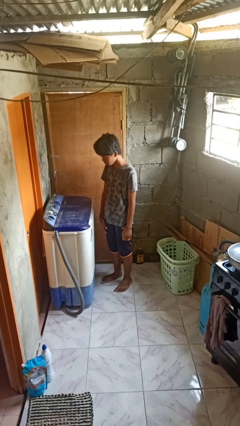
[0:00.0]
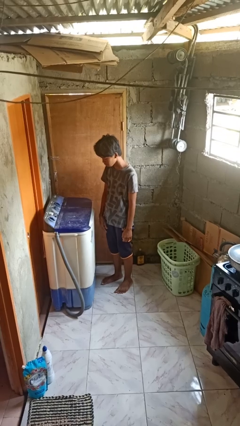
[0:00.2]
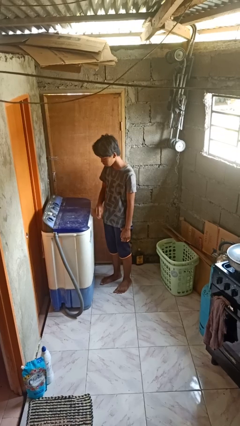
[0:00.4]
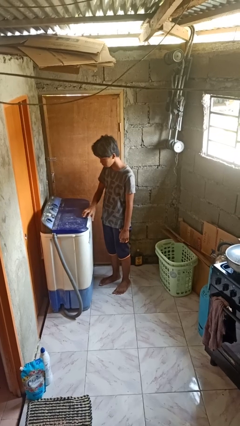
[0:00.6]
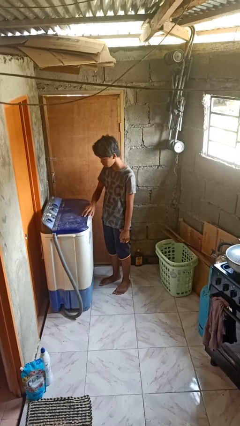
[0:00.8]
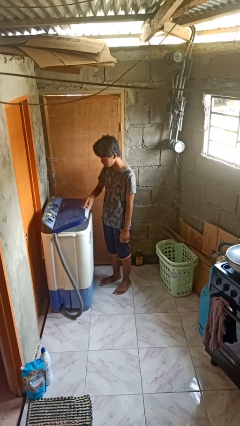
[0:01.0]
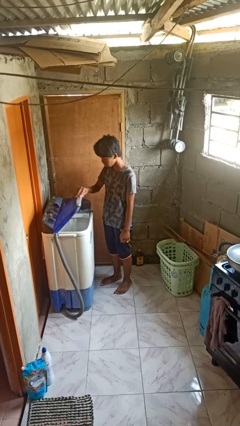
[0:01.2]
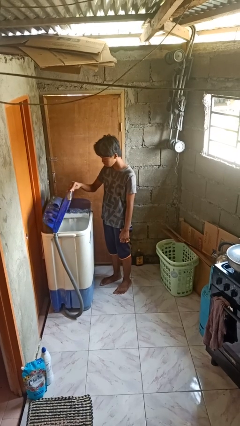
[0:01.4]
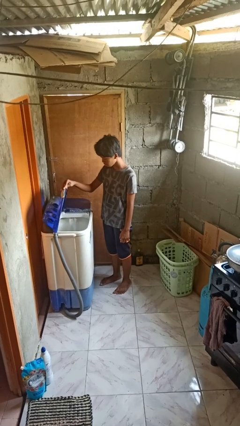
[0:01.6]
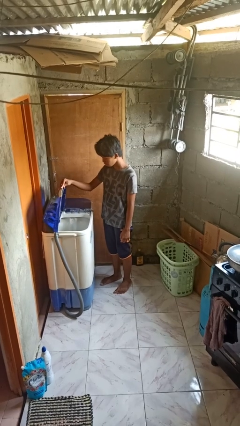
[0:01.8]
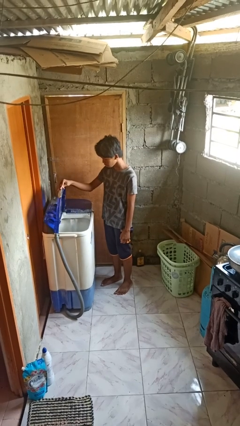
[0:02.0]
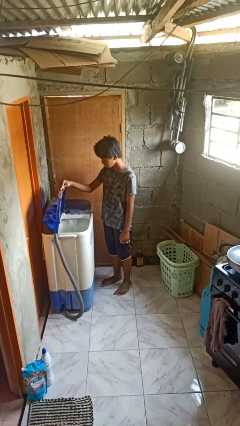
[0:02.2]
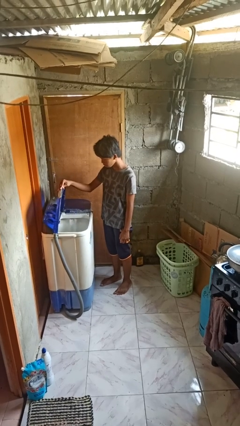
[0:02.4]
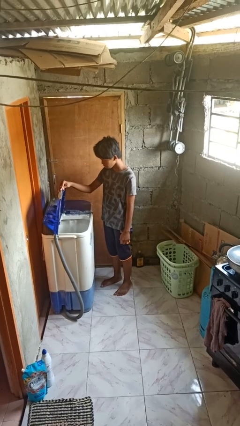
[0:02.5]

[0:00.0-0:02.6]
person opens clothes washer

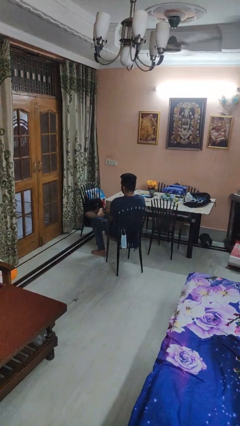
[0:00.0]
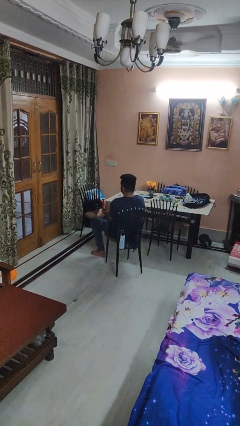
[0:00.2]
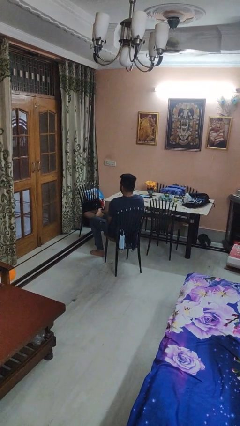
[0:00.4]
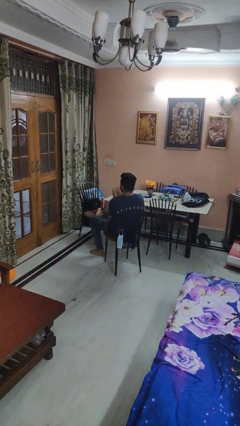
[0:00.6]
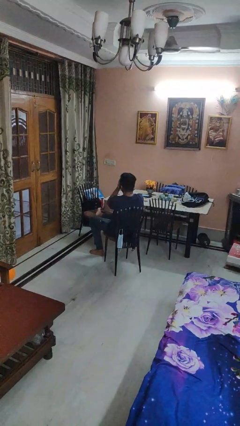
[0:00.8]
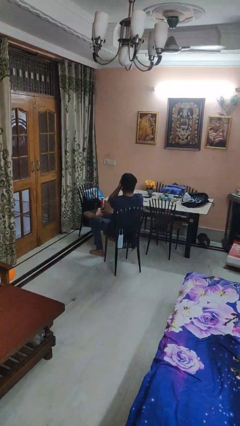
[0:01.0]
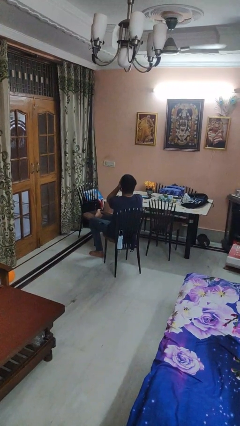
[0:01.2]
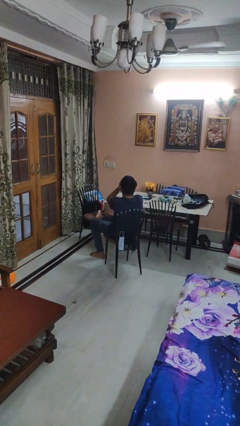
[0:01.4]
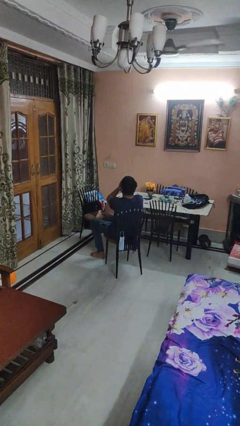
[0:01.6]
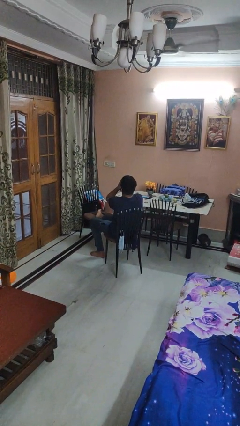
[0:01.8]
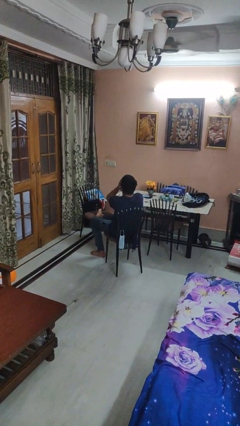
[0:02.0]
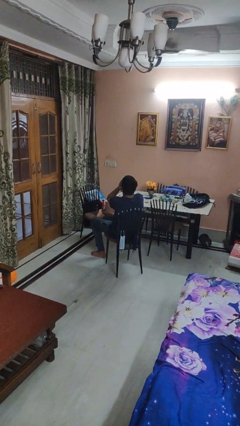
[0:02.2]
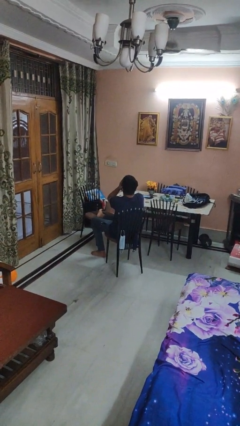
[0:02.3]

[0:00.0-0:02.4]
person covers face with hands

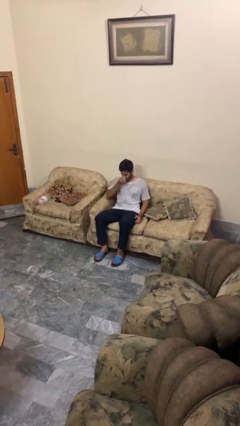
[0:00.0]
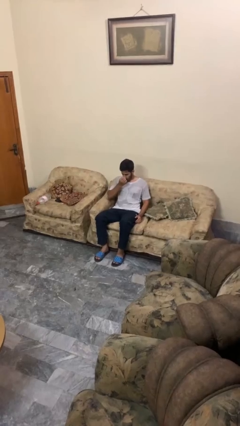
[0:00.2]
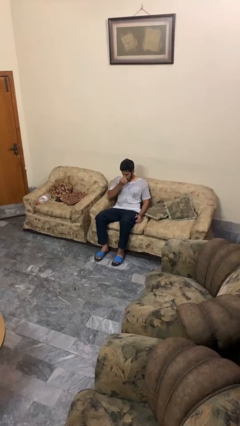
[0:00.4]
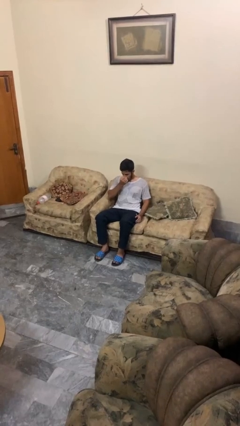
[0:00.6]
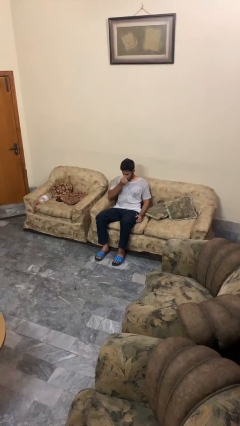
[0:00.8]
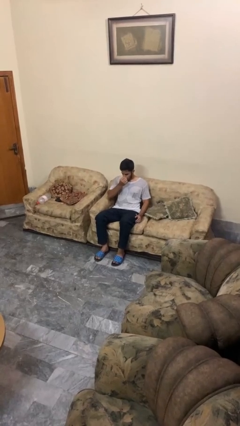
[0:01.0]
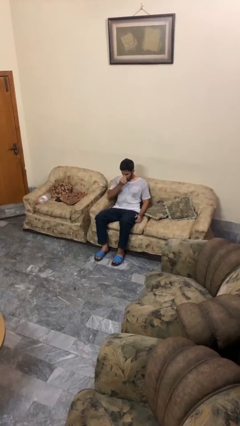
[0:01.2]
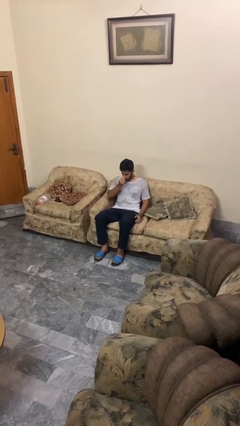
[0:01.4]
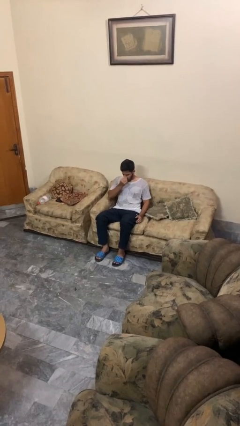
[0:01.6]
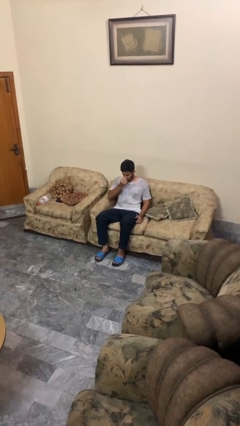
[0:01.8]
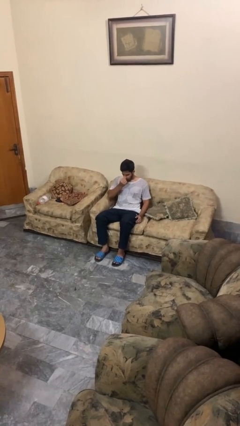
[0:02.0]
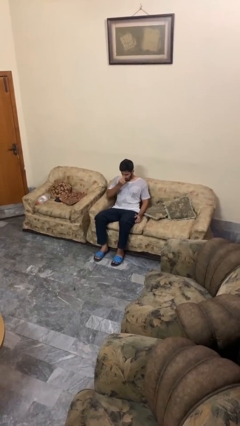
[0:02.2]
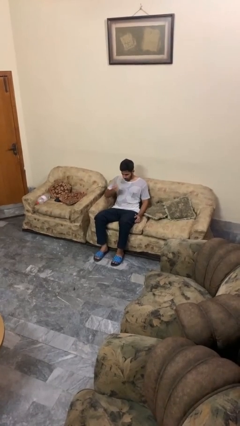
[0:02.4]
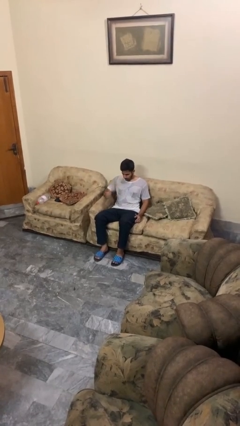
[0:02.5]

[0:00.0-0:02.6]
person scratches face

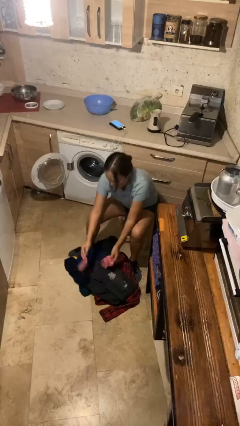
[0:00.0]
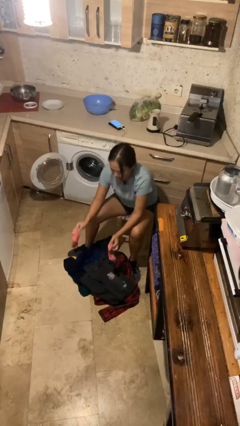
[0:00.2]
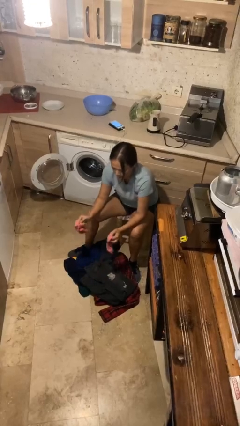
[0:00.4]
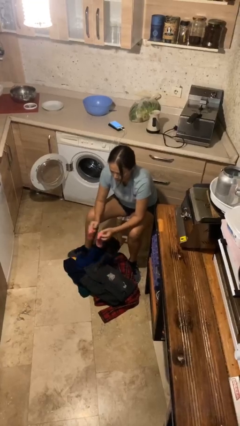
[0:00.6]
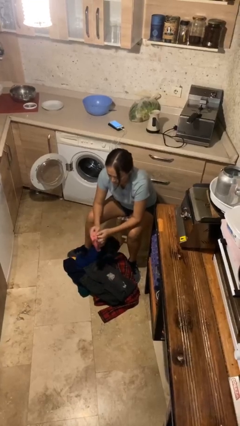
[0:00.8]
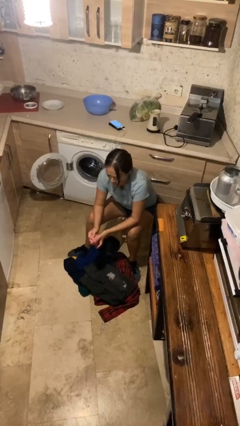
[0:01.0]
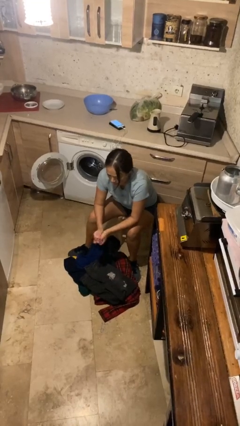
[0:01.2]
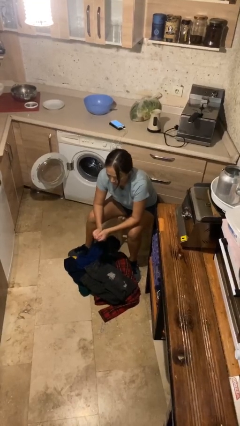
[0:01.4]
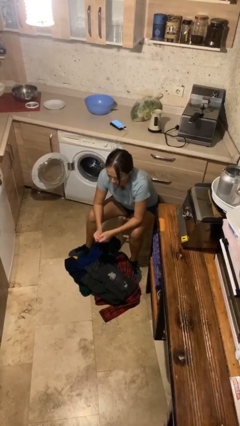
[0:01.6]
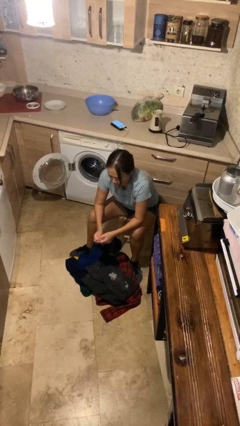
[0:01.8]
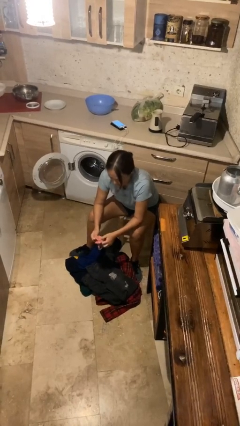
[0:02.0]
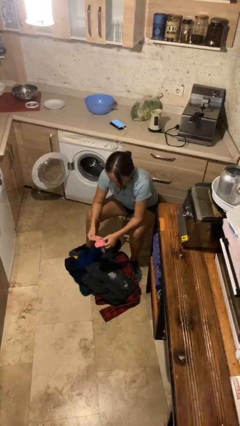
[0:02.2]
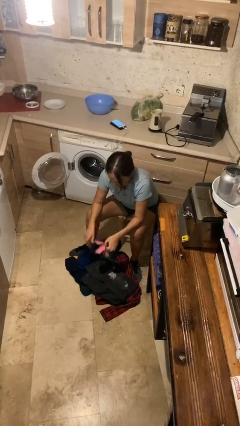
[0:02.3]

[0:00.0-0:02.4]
person folds socks

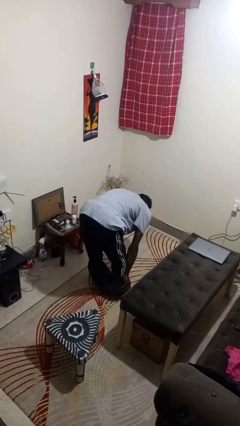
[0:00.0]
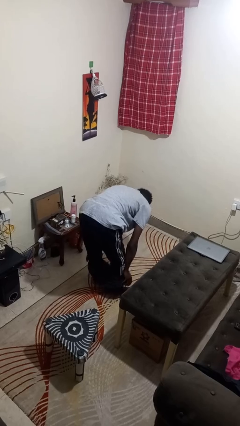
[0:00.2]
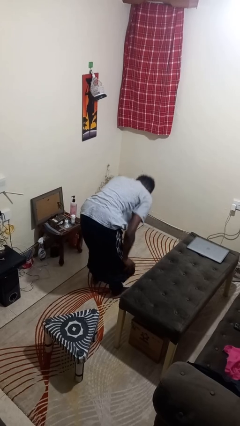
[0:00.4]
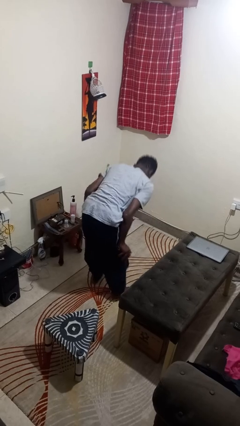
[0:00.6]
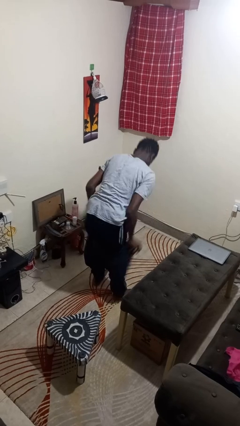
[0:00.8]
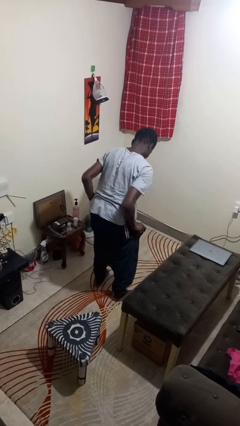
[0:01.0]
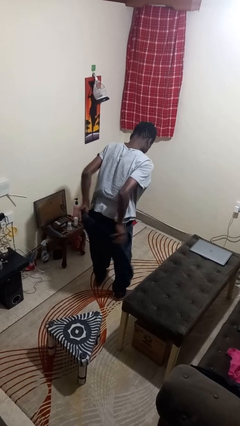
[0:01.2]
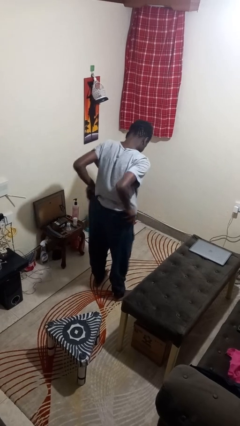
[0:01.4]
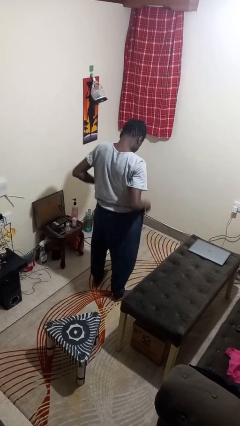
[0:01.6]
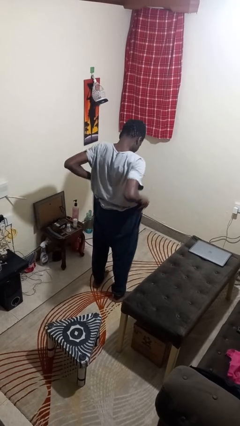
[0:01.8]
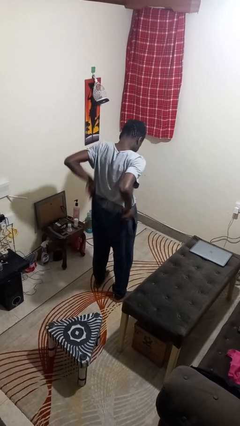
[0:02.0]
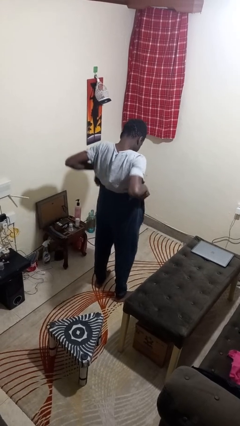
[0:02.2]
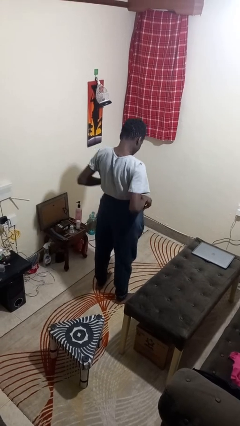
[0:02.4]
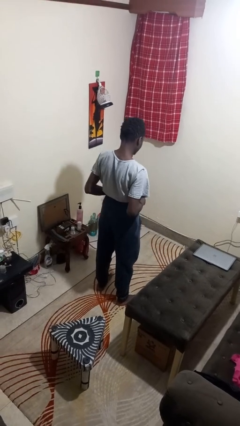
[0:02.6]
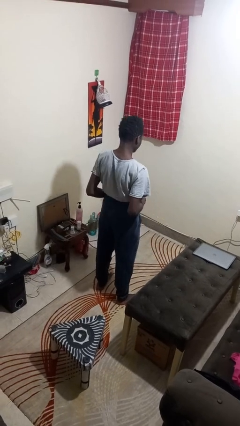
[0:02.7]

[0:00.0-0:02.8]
person puts on pants

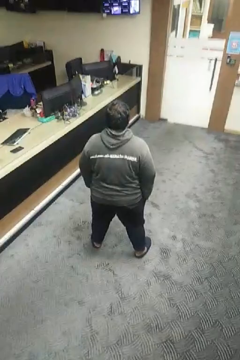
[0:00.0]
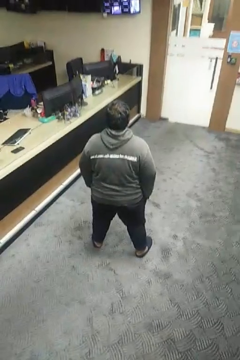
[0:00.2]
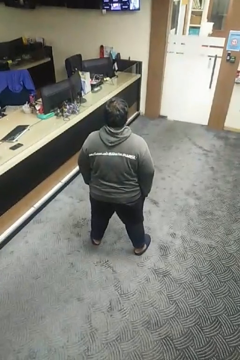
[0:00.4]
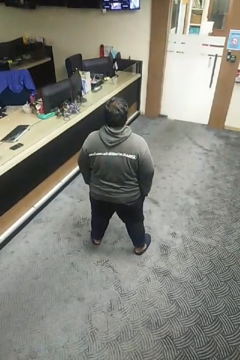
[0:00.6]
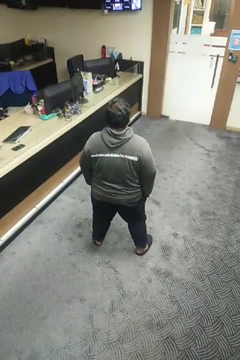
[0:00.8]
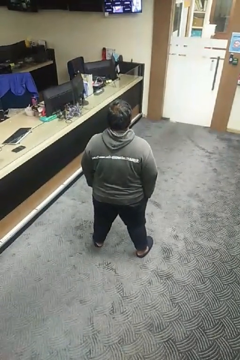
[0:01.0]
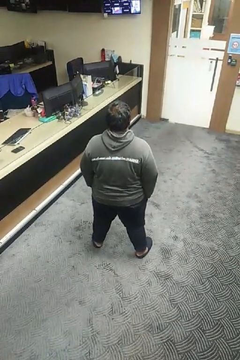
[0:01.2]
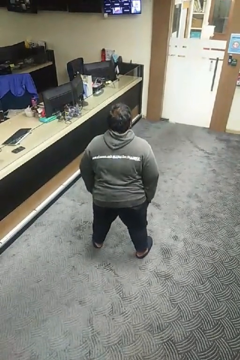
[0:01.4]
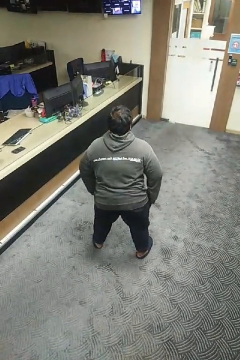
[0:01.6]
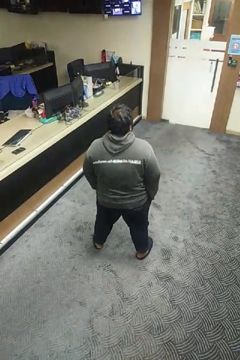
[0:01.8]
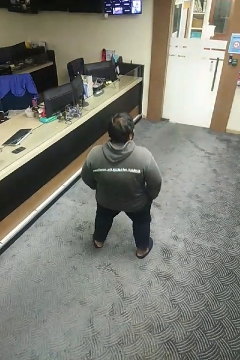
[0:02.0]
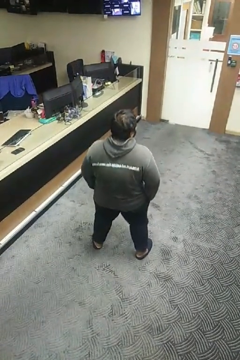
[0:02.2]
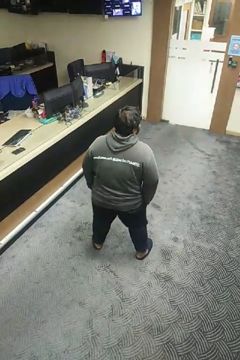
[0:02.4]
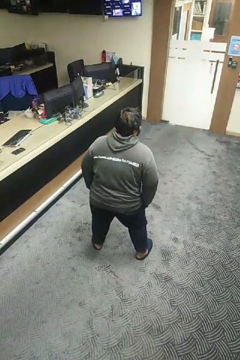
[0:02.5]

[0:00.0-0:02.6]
person wiggles hips

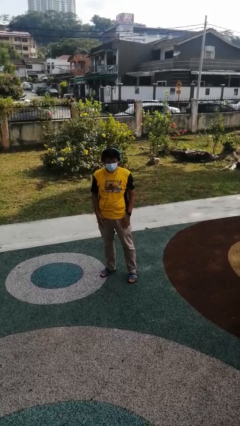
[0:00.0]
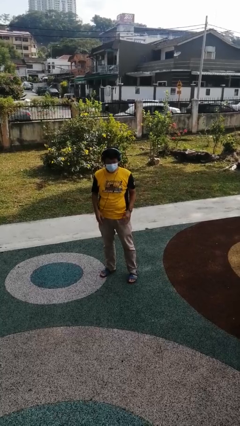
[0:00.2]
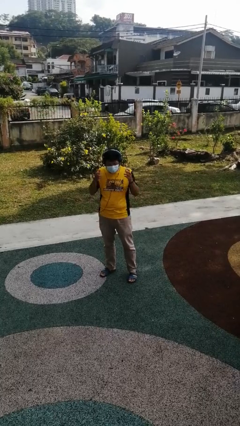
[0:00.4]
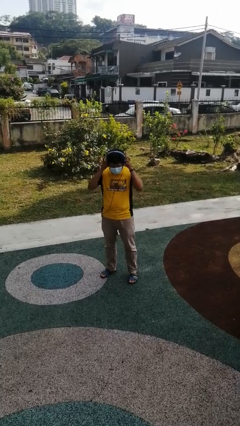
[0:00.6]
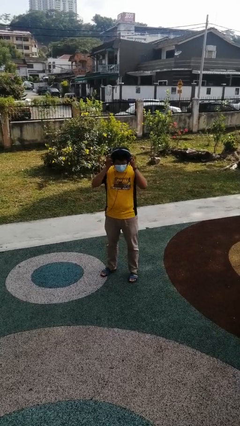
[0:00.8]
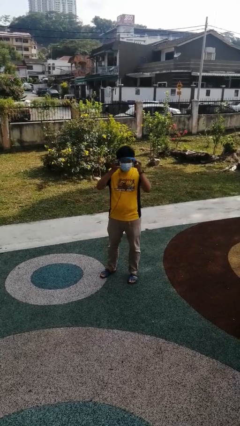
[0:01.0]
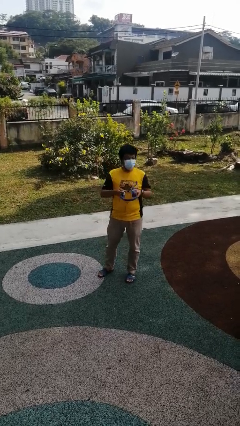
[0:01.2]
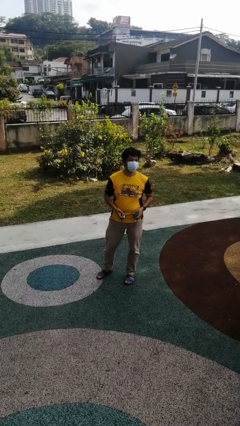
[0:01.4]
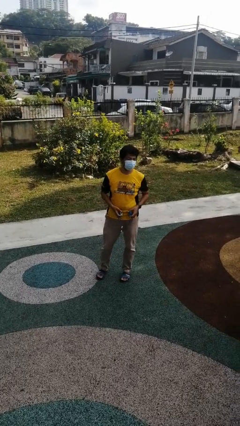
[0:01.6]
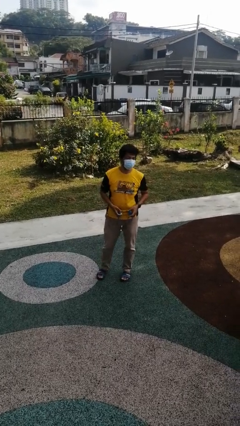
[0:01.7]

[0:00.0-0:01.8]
person takes off headphones

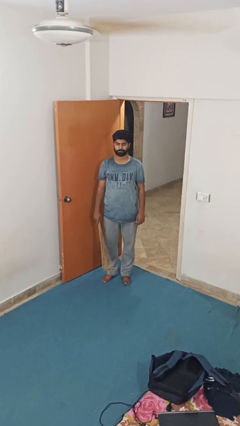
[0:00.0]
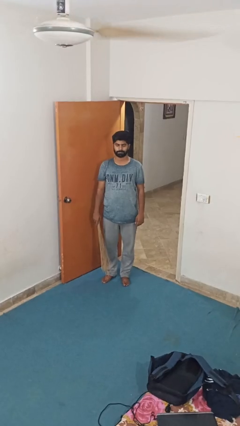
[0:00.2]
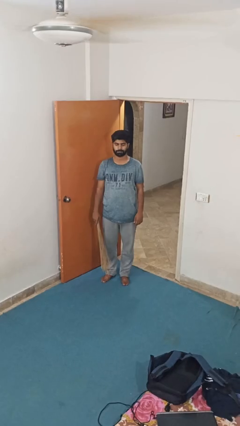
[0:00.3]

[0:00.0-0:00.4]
person sweeps floor

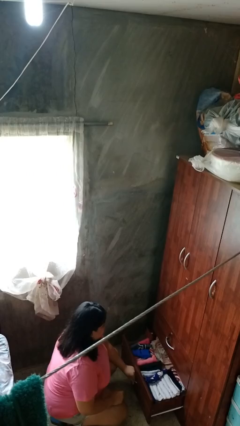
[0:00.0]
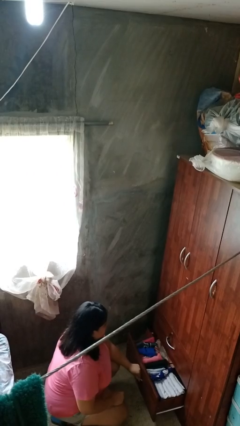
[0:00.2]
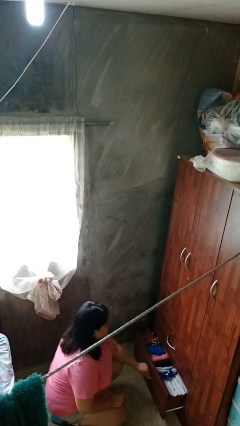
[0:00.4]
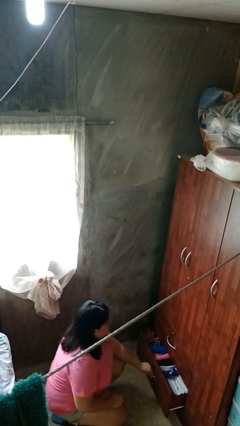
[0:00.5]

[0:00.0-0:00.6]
person closes dresser drawer
